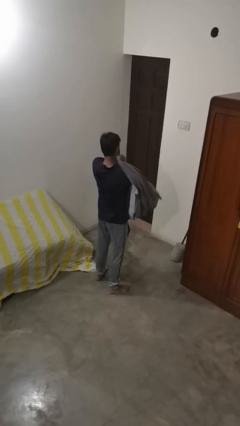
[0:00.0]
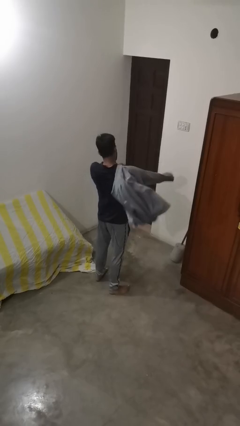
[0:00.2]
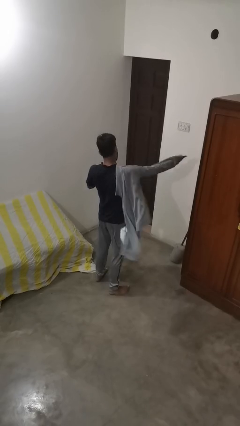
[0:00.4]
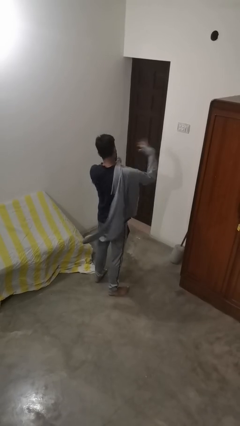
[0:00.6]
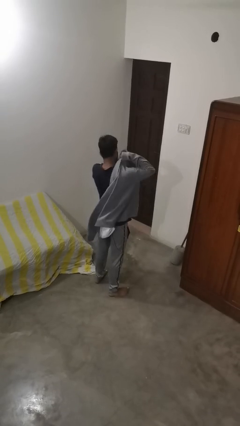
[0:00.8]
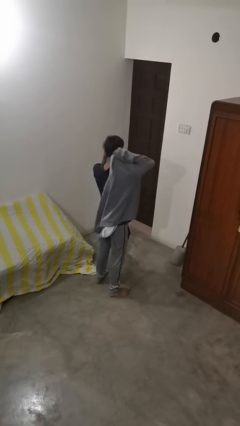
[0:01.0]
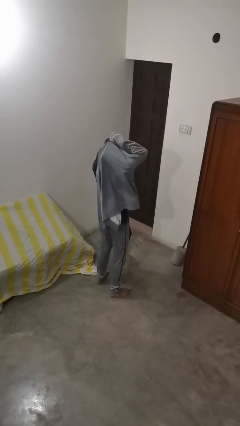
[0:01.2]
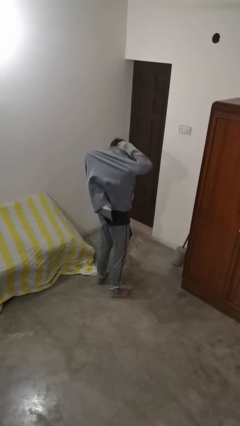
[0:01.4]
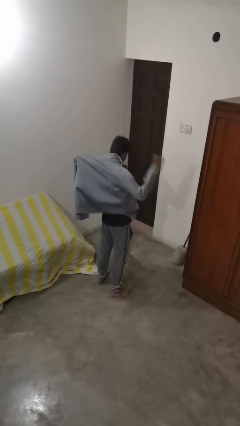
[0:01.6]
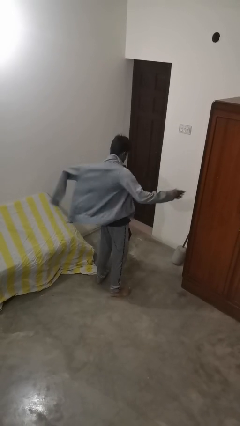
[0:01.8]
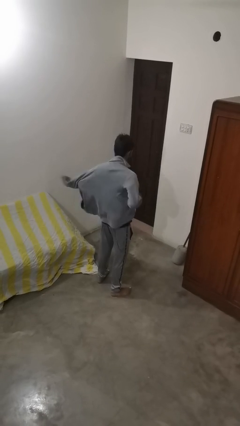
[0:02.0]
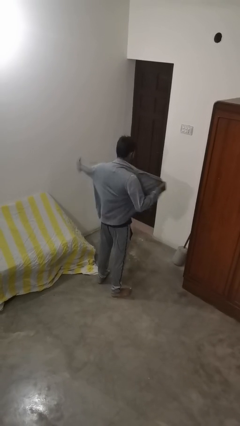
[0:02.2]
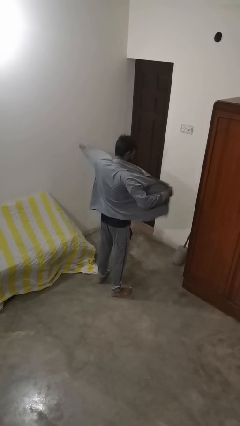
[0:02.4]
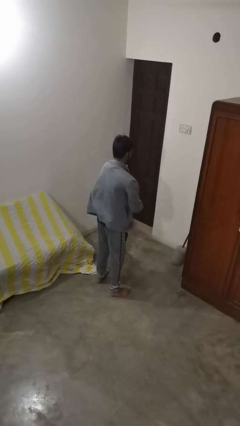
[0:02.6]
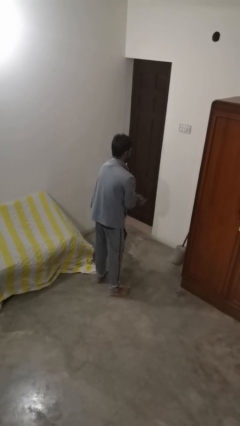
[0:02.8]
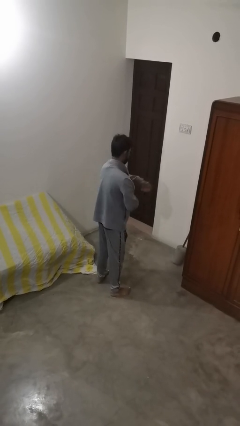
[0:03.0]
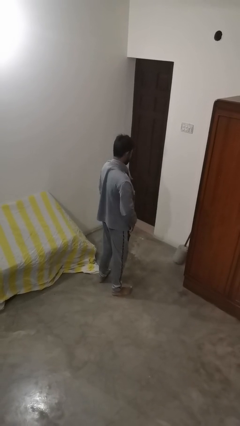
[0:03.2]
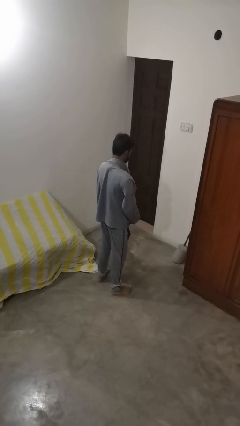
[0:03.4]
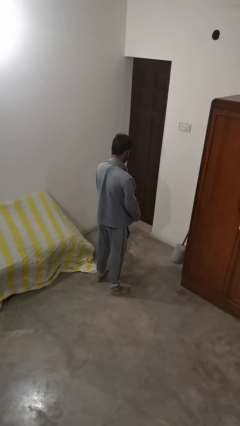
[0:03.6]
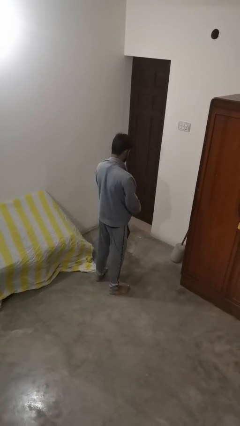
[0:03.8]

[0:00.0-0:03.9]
person puts on jacket

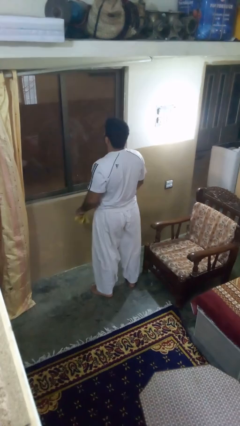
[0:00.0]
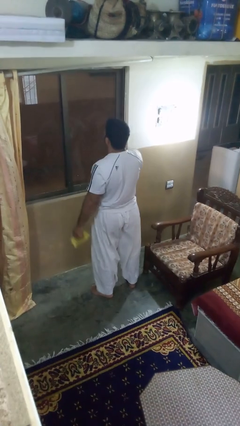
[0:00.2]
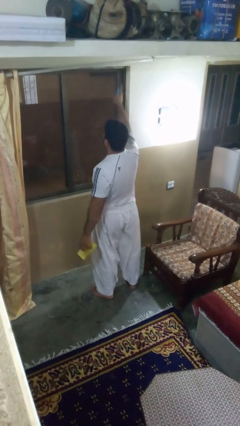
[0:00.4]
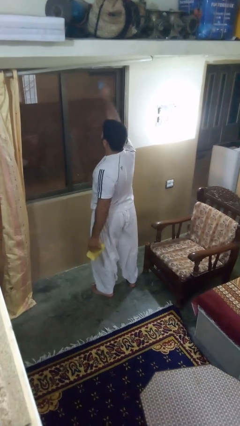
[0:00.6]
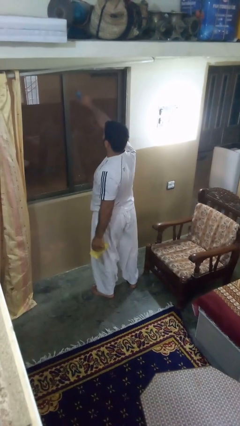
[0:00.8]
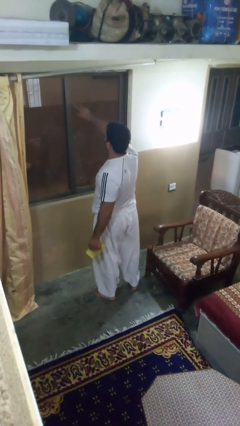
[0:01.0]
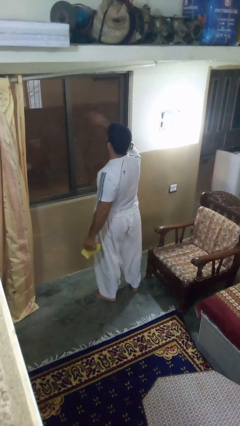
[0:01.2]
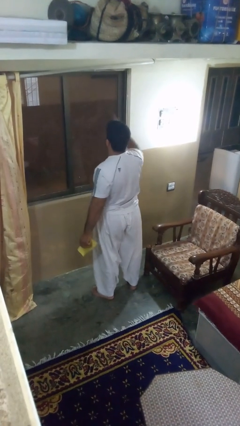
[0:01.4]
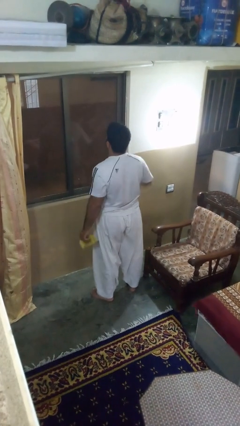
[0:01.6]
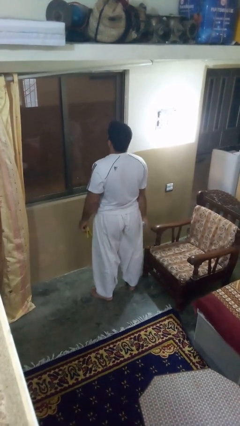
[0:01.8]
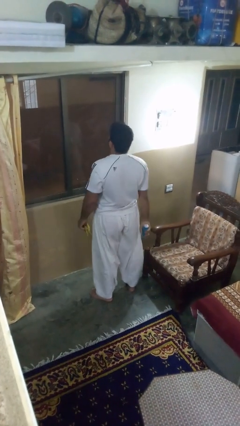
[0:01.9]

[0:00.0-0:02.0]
person sprays from bottle

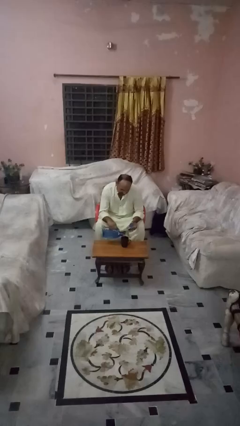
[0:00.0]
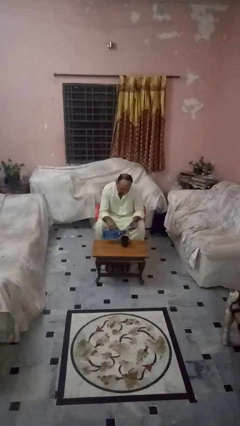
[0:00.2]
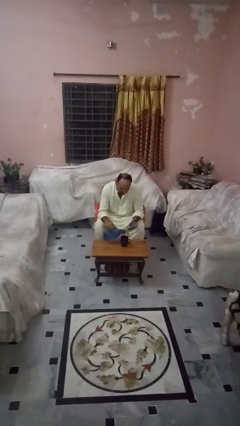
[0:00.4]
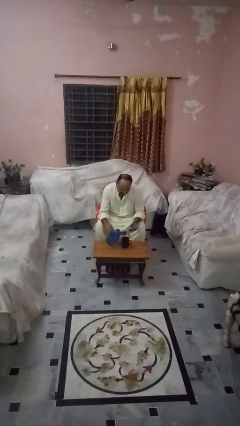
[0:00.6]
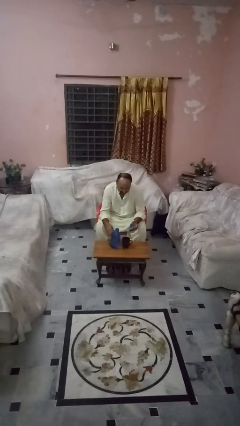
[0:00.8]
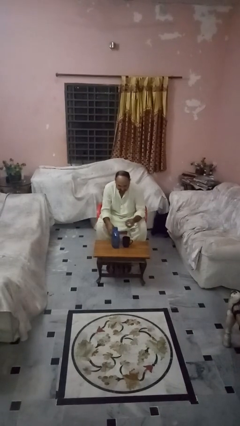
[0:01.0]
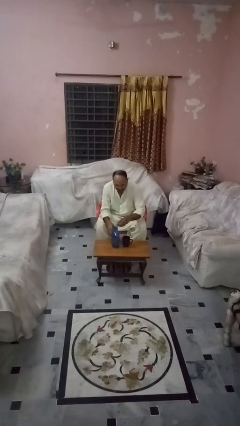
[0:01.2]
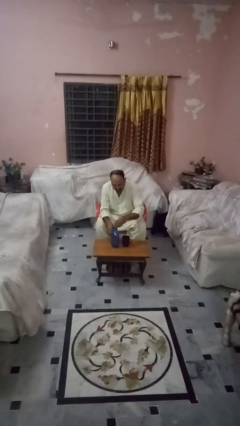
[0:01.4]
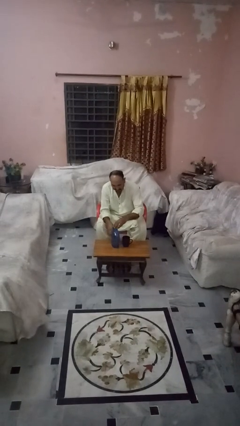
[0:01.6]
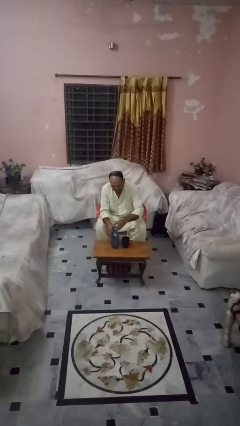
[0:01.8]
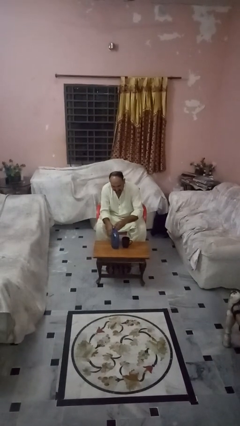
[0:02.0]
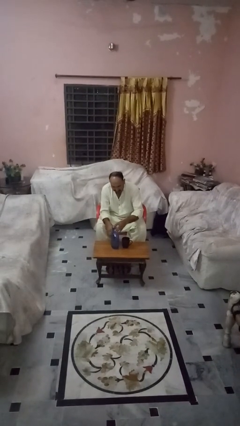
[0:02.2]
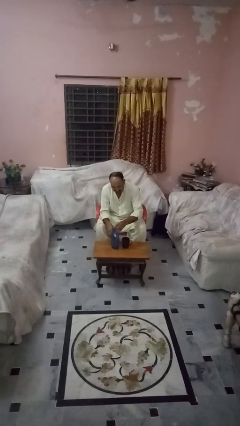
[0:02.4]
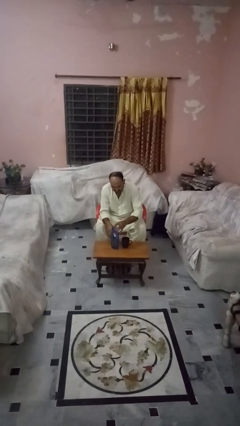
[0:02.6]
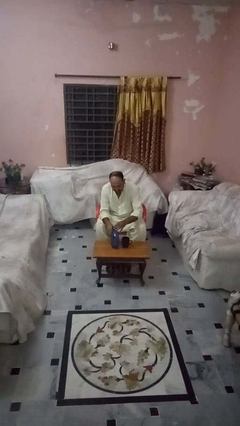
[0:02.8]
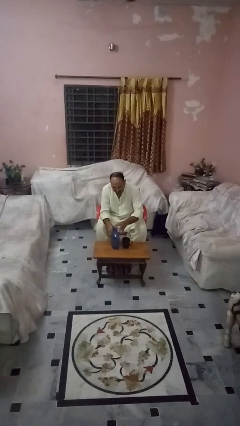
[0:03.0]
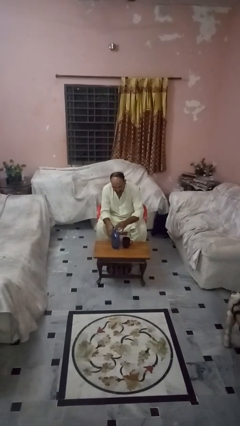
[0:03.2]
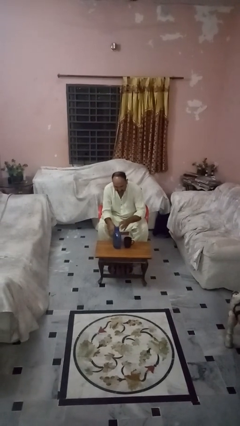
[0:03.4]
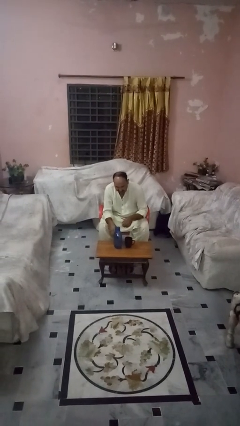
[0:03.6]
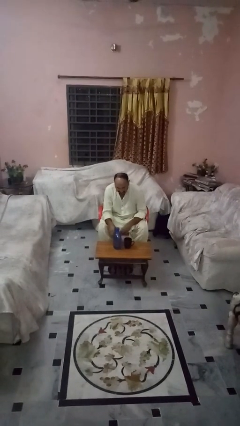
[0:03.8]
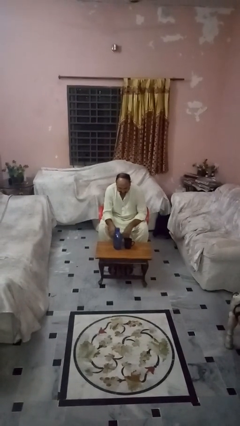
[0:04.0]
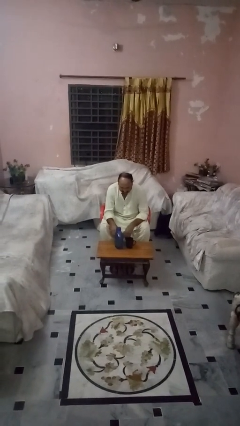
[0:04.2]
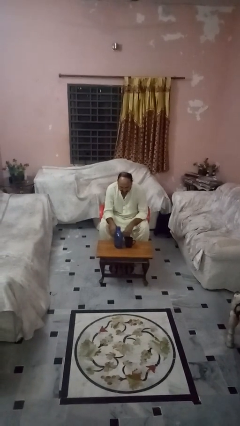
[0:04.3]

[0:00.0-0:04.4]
person screws lid to bottle

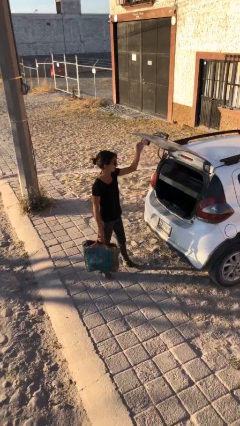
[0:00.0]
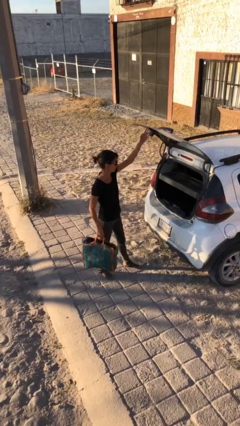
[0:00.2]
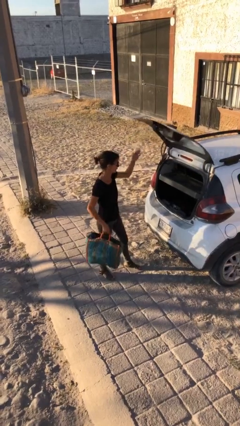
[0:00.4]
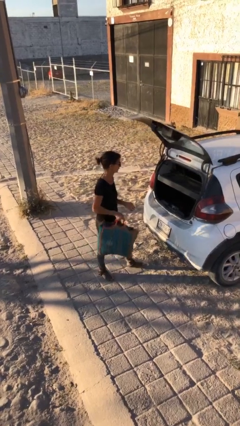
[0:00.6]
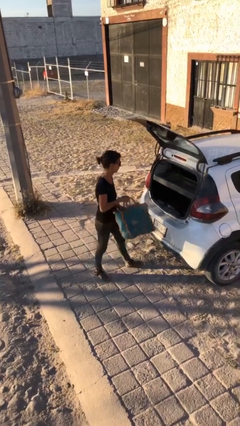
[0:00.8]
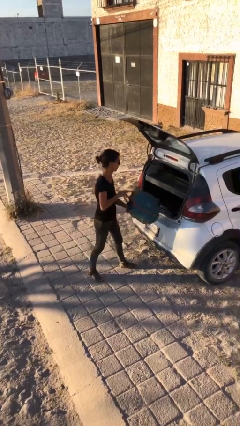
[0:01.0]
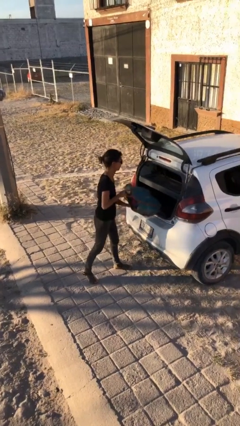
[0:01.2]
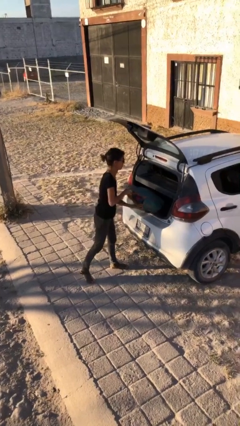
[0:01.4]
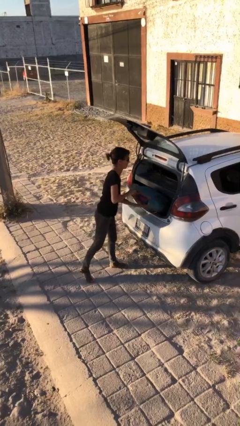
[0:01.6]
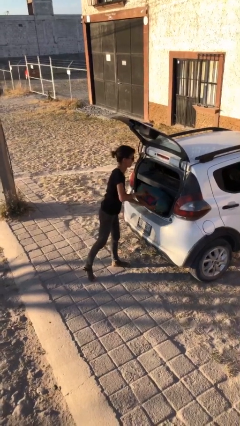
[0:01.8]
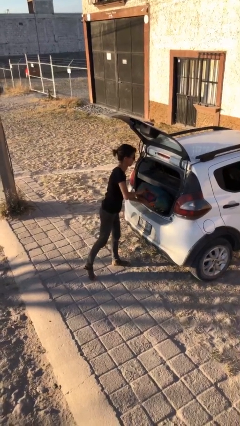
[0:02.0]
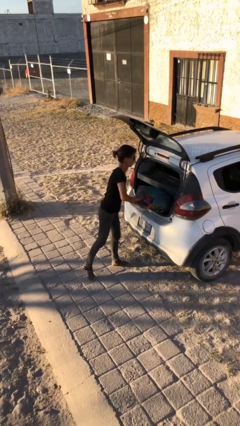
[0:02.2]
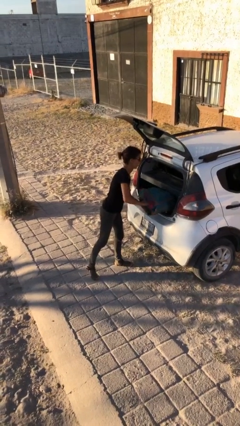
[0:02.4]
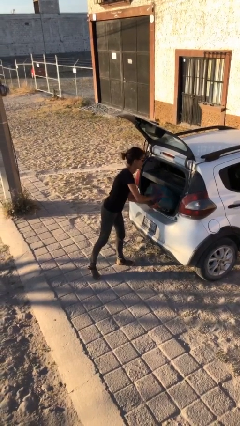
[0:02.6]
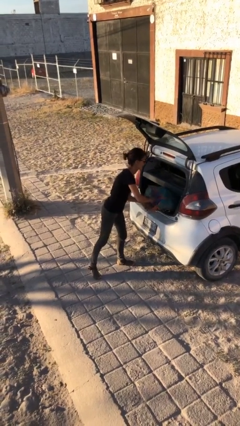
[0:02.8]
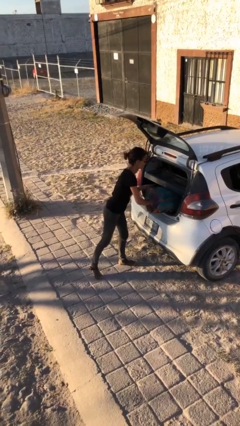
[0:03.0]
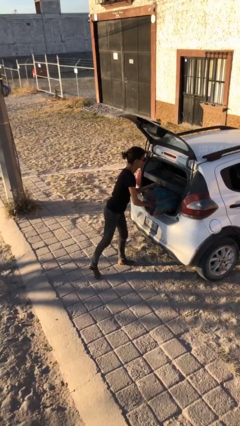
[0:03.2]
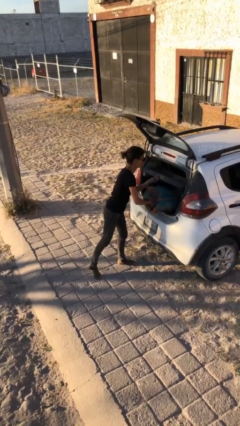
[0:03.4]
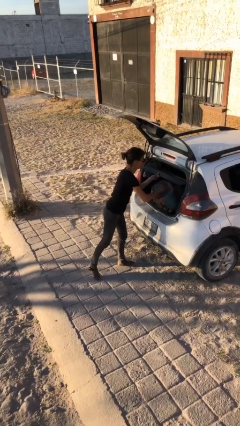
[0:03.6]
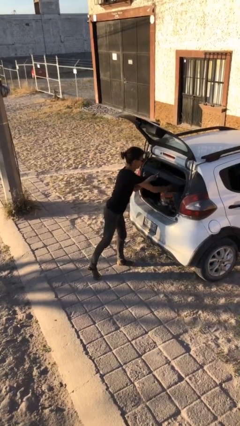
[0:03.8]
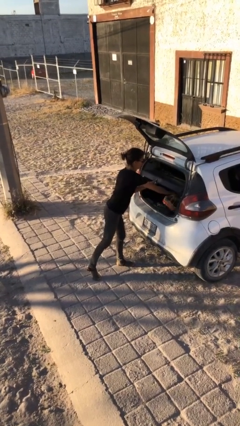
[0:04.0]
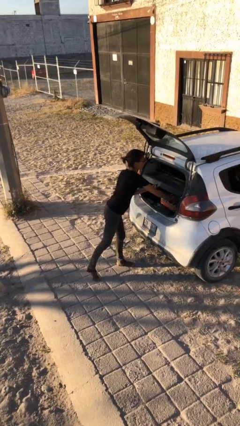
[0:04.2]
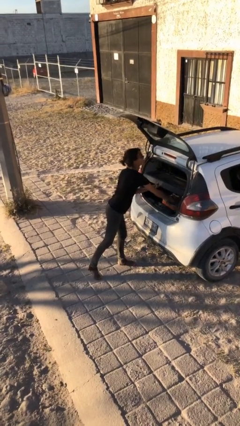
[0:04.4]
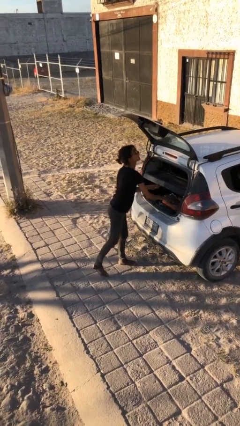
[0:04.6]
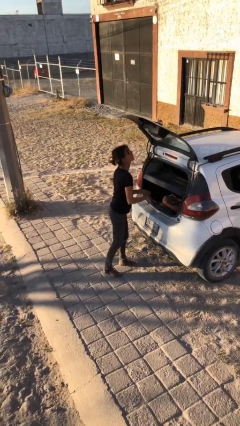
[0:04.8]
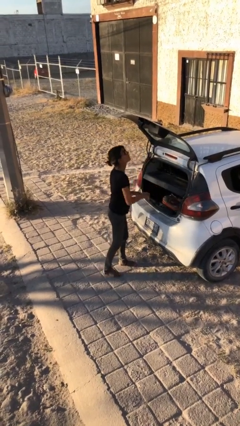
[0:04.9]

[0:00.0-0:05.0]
person loads car

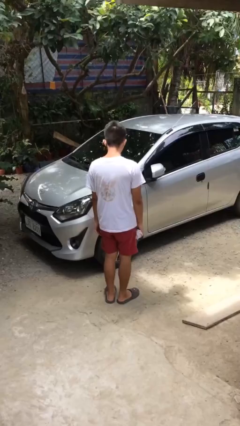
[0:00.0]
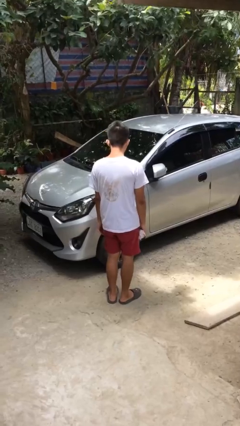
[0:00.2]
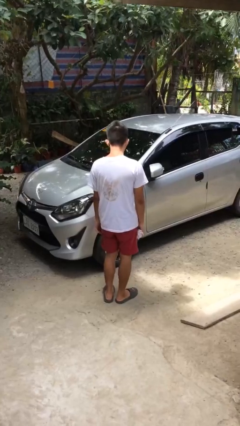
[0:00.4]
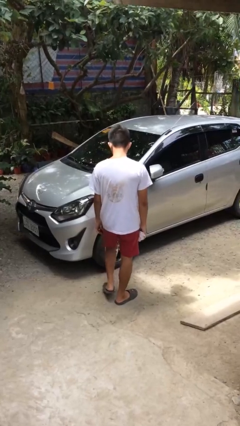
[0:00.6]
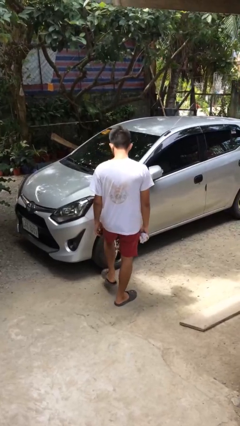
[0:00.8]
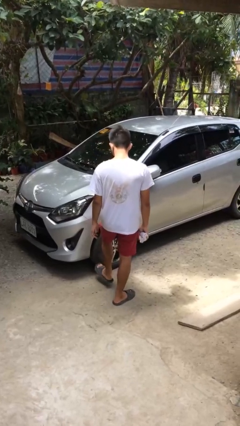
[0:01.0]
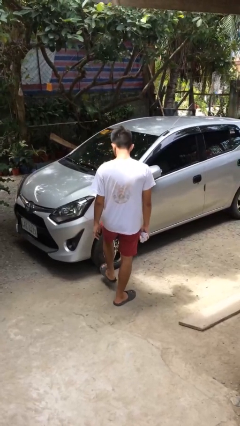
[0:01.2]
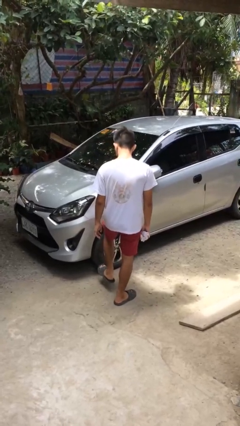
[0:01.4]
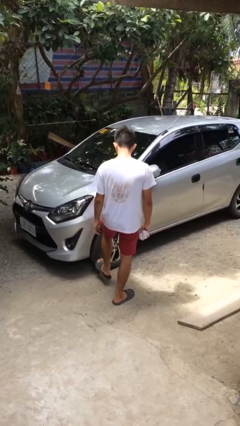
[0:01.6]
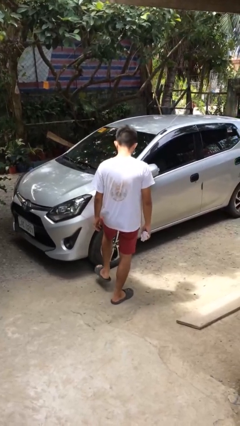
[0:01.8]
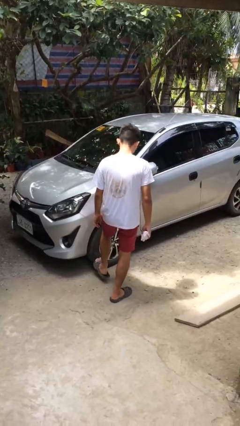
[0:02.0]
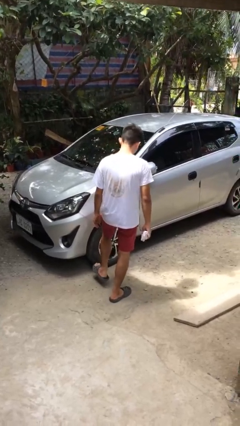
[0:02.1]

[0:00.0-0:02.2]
person kicks car tires
